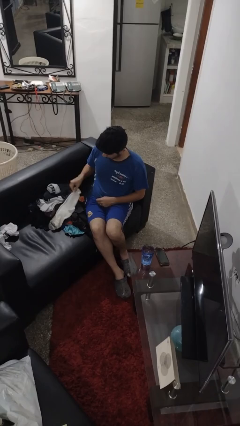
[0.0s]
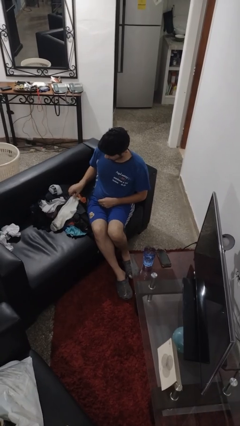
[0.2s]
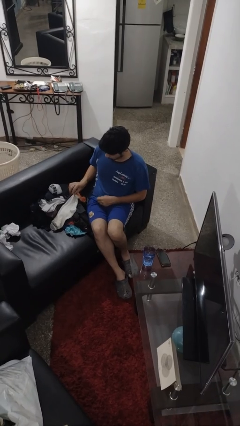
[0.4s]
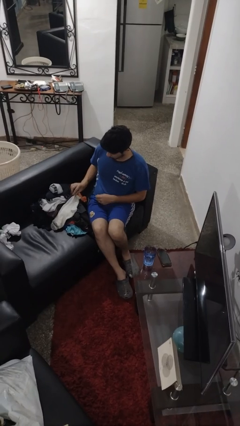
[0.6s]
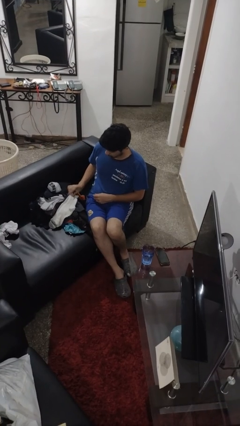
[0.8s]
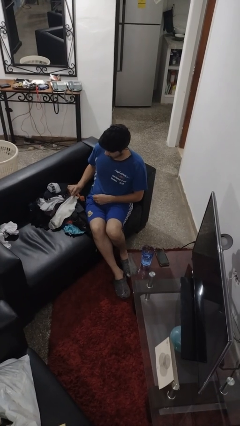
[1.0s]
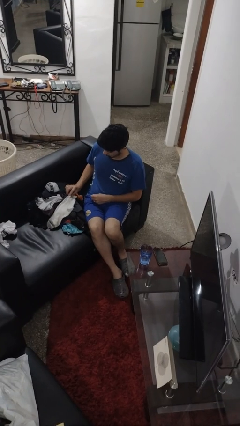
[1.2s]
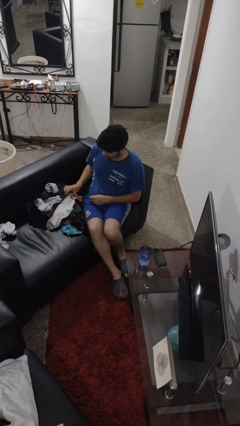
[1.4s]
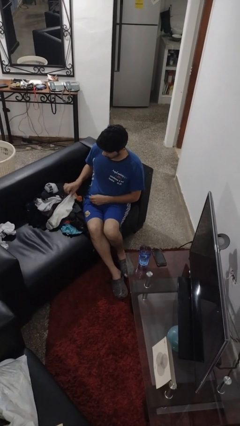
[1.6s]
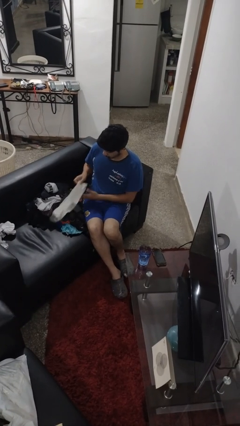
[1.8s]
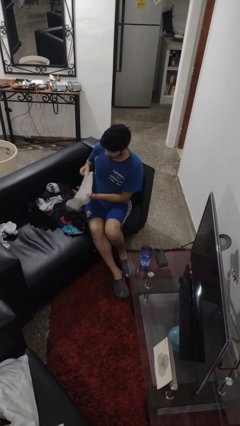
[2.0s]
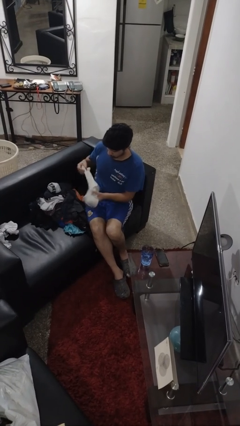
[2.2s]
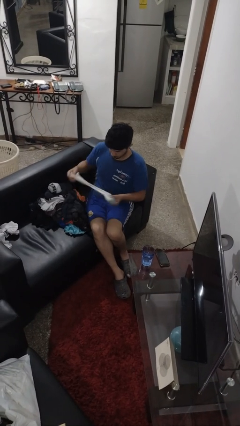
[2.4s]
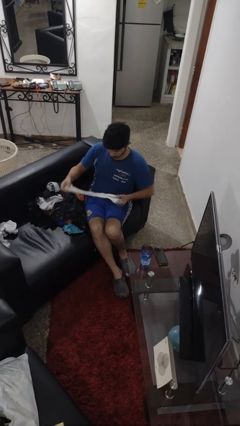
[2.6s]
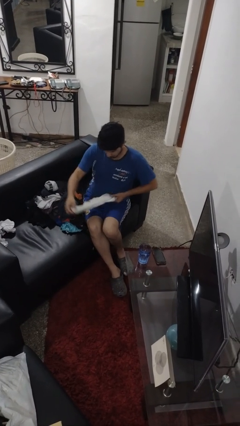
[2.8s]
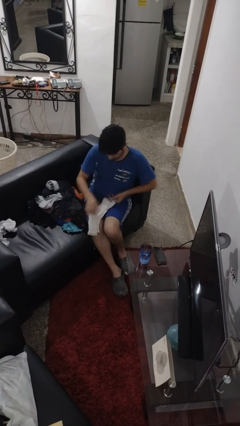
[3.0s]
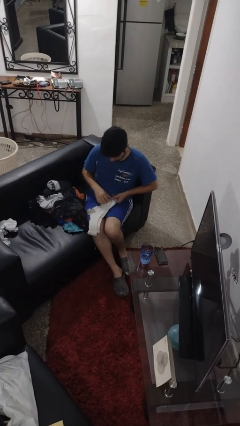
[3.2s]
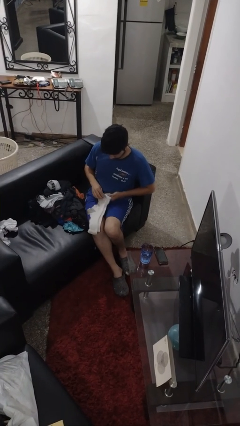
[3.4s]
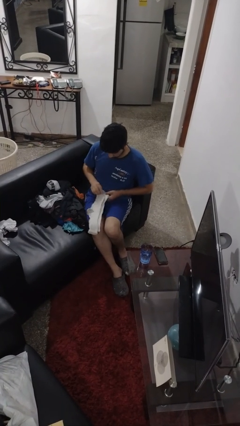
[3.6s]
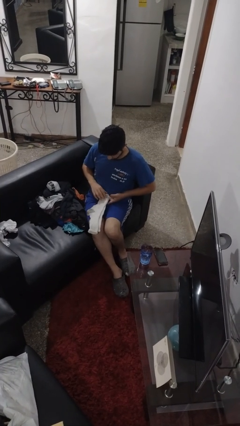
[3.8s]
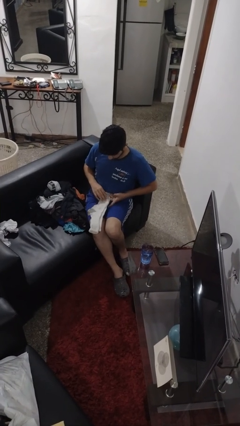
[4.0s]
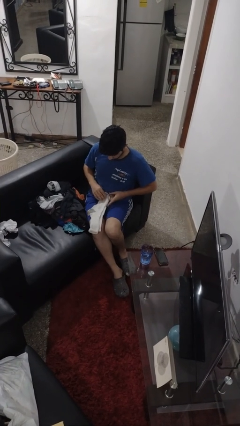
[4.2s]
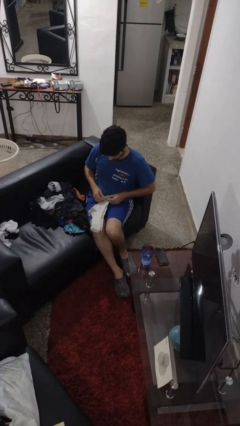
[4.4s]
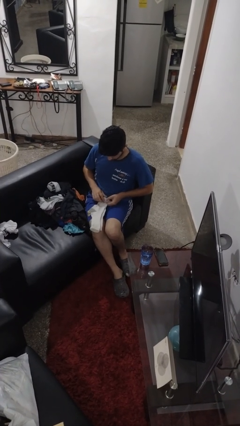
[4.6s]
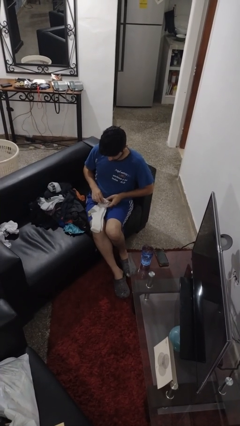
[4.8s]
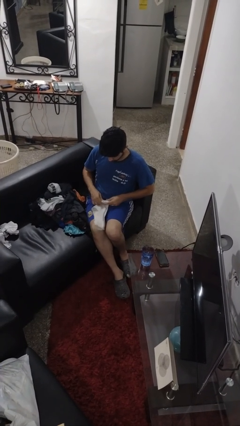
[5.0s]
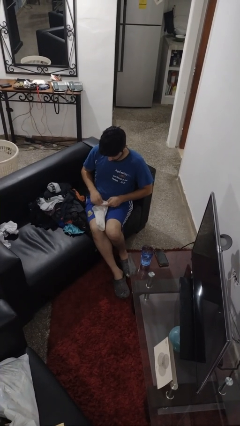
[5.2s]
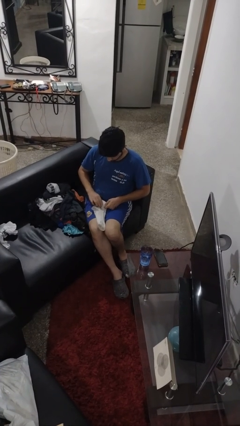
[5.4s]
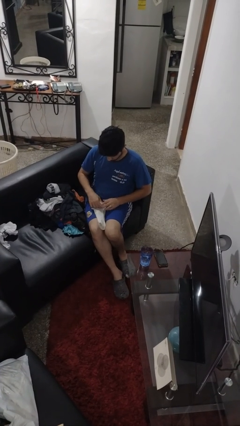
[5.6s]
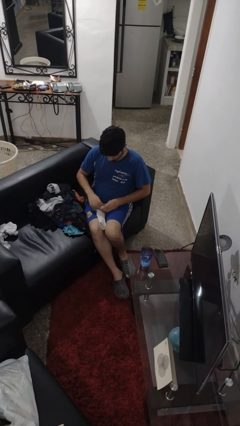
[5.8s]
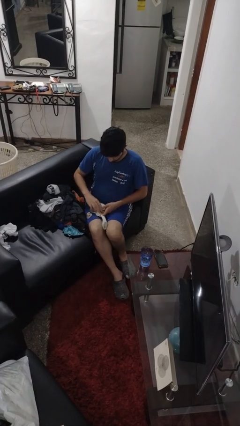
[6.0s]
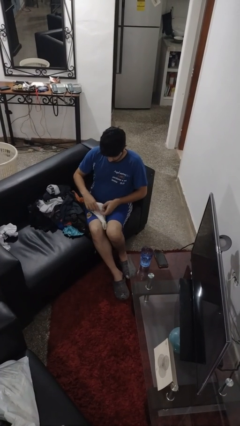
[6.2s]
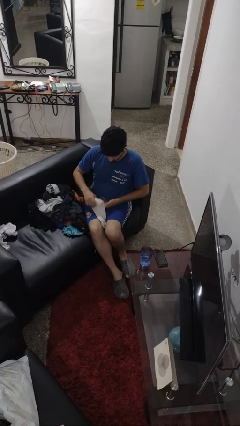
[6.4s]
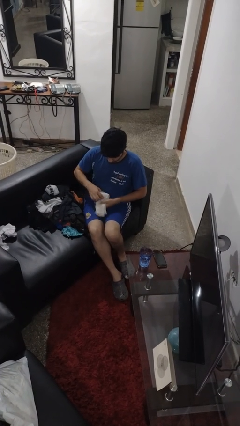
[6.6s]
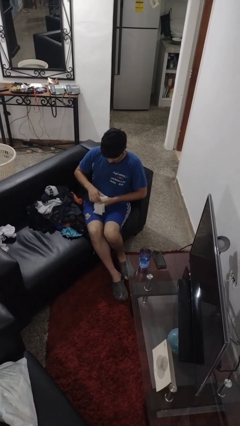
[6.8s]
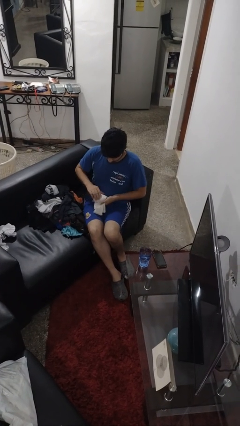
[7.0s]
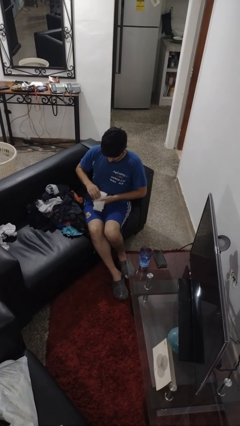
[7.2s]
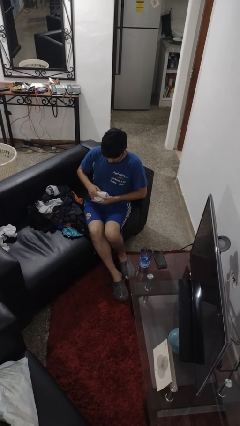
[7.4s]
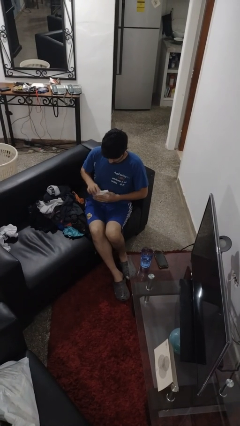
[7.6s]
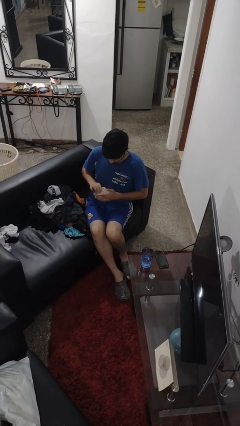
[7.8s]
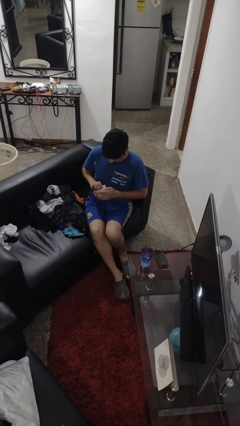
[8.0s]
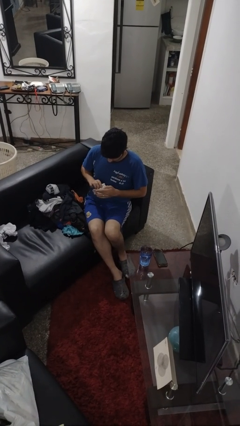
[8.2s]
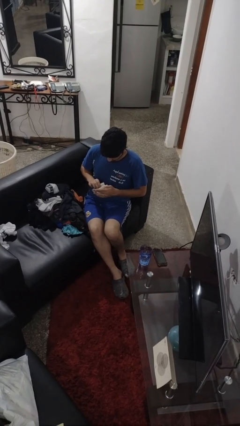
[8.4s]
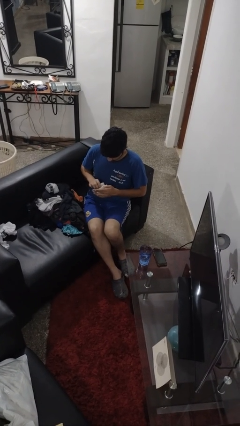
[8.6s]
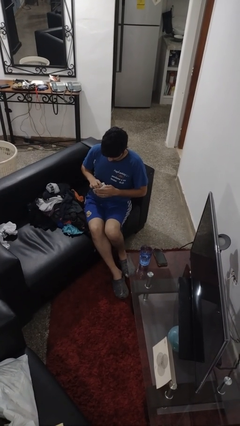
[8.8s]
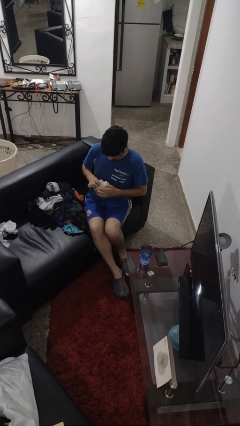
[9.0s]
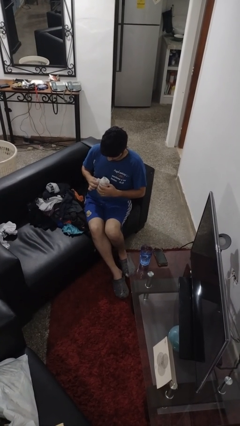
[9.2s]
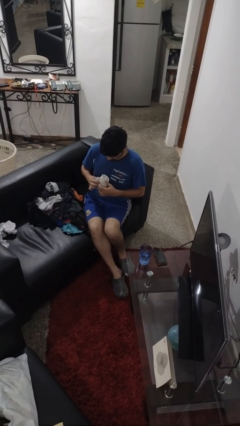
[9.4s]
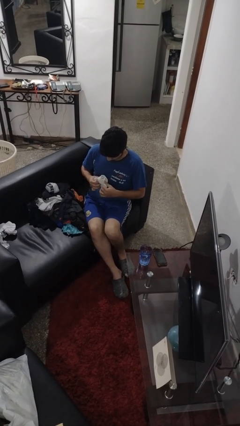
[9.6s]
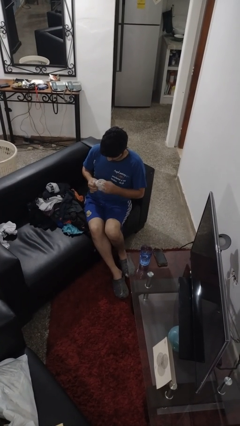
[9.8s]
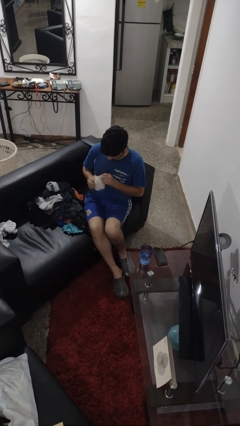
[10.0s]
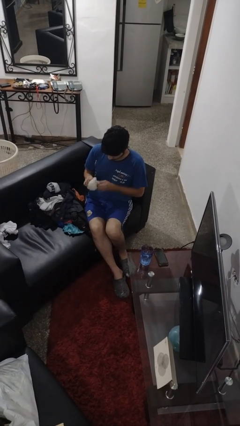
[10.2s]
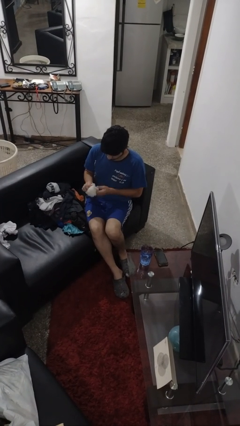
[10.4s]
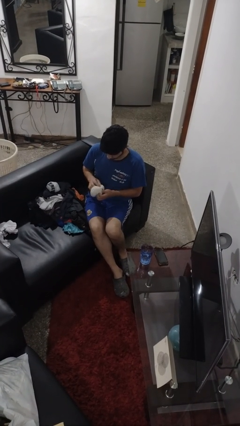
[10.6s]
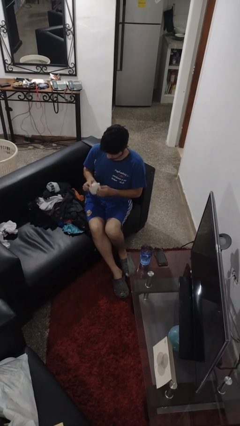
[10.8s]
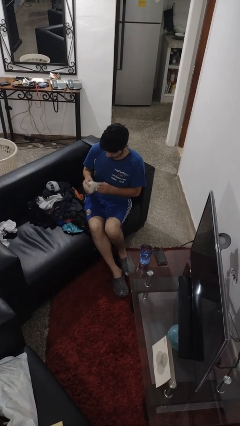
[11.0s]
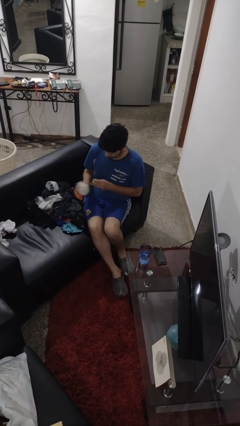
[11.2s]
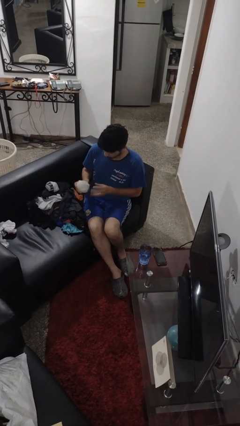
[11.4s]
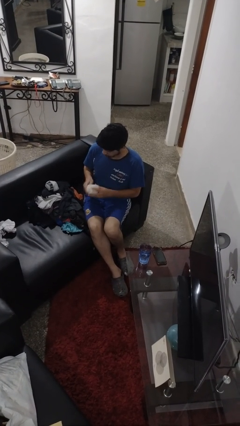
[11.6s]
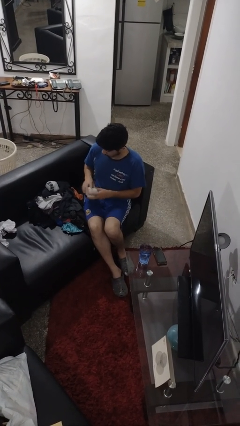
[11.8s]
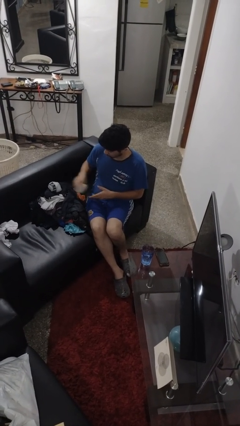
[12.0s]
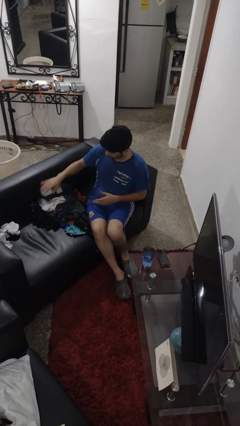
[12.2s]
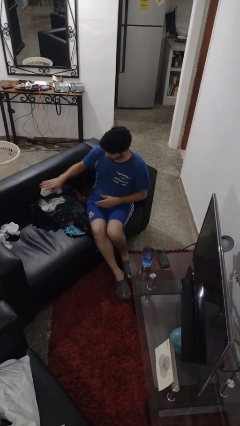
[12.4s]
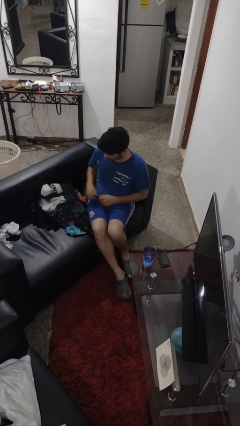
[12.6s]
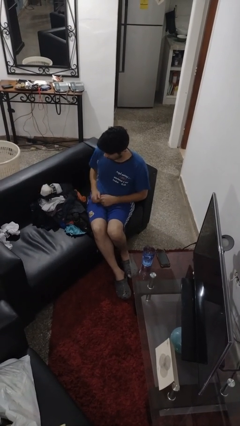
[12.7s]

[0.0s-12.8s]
person folds socks

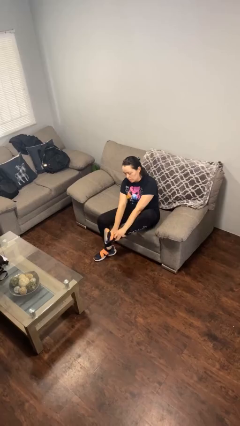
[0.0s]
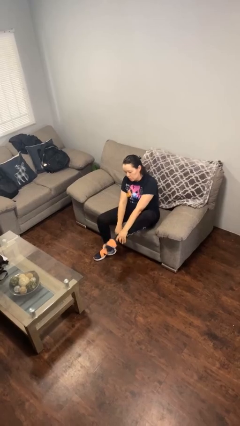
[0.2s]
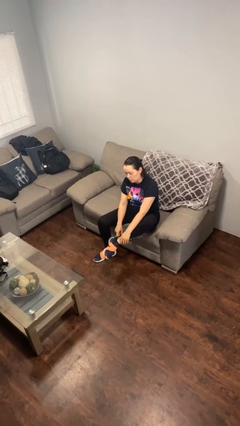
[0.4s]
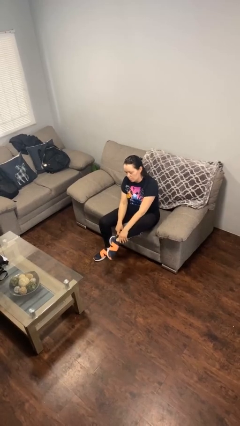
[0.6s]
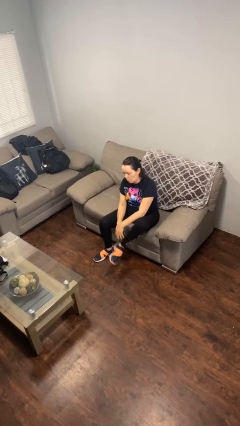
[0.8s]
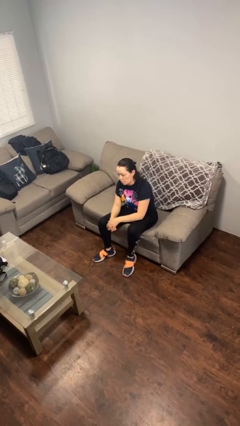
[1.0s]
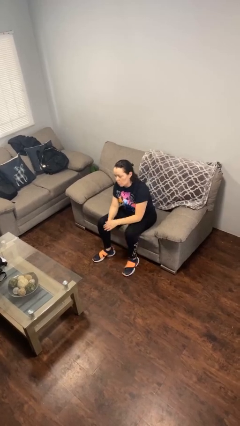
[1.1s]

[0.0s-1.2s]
person puts on shoes

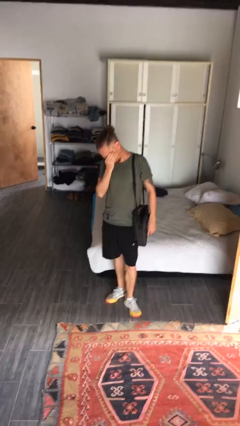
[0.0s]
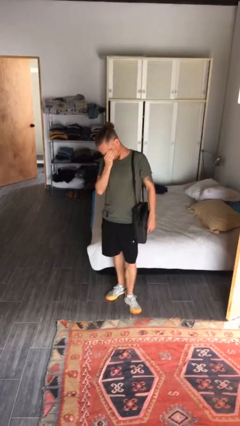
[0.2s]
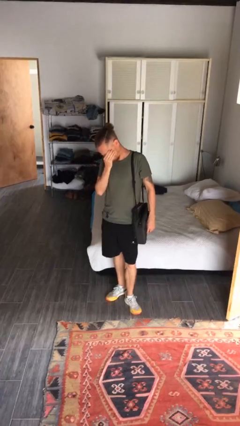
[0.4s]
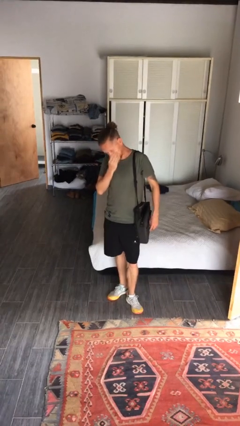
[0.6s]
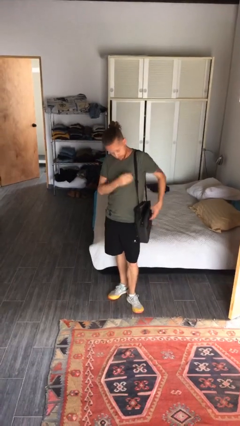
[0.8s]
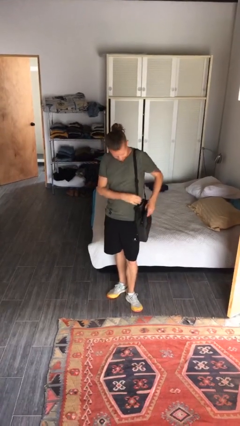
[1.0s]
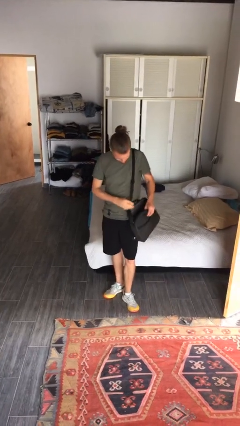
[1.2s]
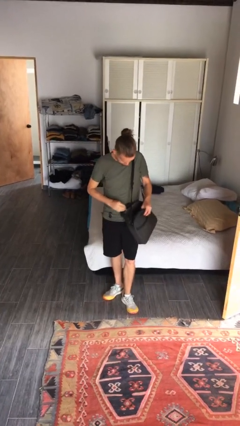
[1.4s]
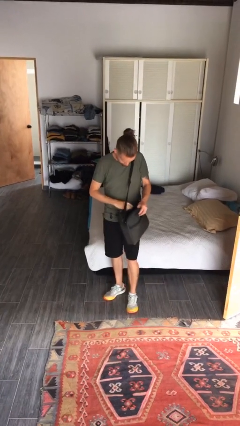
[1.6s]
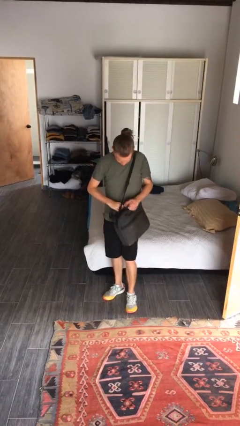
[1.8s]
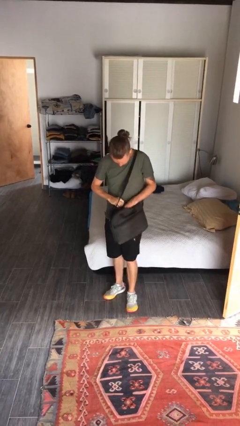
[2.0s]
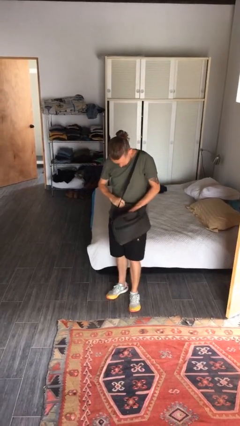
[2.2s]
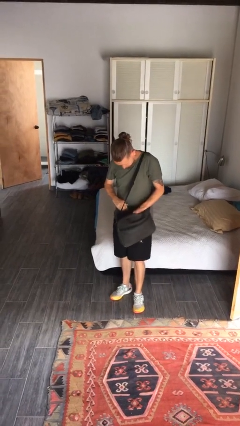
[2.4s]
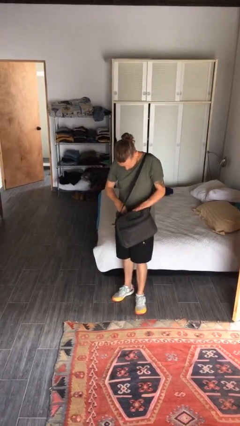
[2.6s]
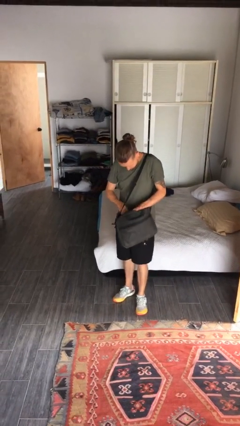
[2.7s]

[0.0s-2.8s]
person searches in purse

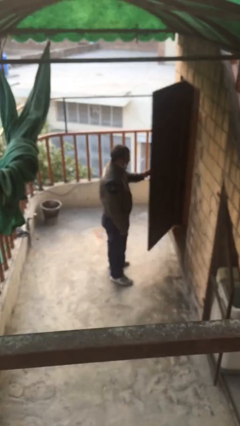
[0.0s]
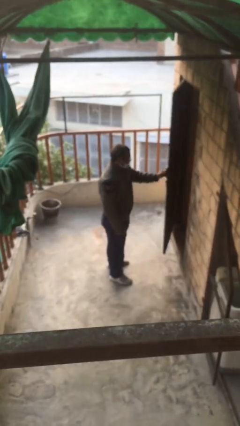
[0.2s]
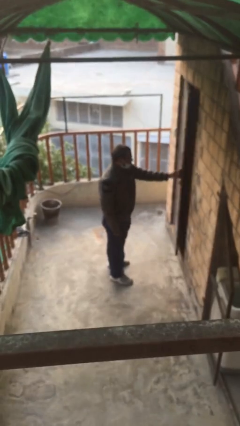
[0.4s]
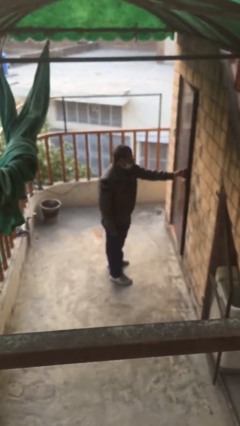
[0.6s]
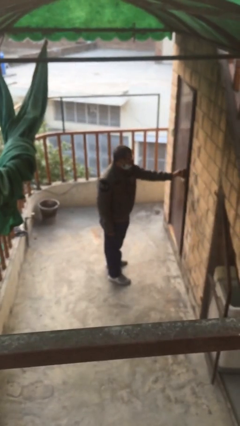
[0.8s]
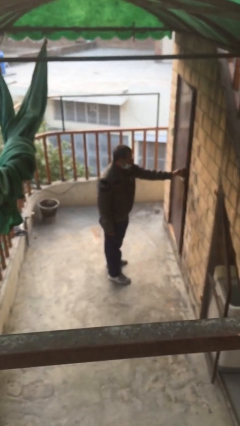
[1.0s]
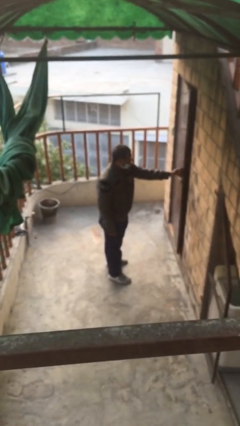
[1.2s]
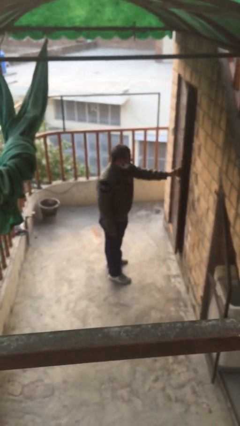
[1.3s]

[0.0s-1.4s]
person closes facility door
